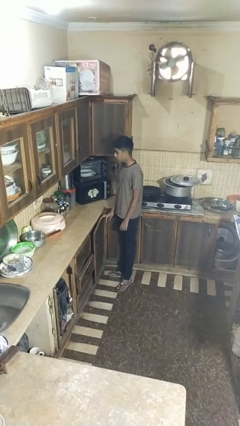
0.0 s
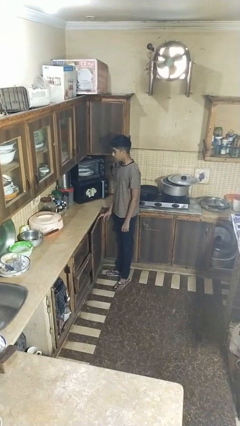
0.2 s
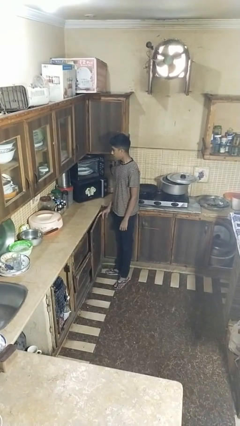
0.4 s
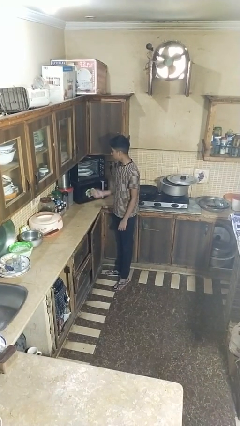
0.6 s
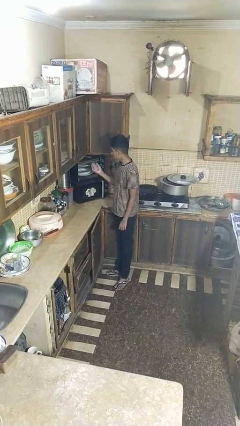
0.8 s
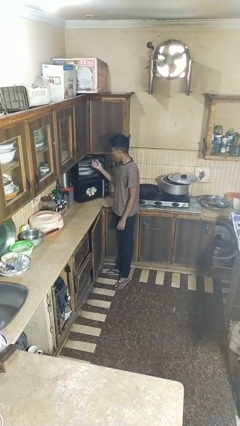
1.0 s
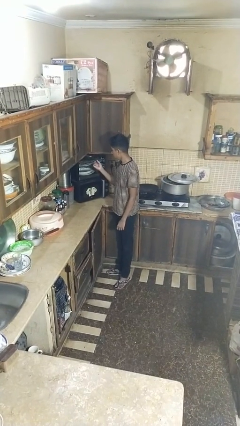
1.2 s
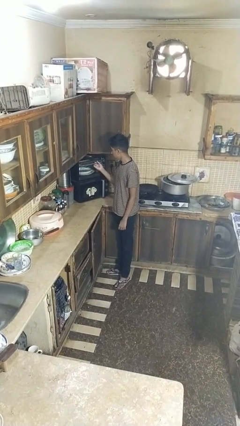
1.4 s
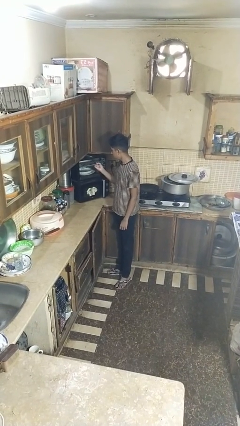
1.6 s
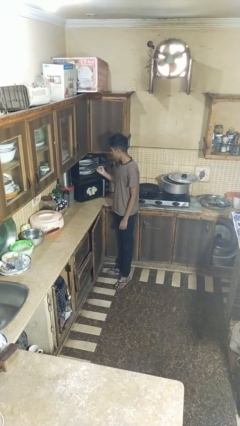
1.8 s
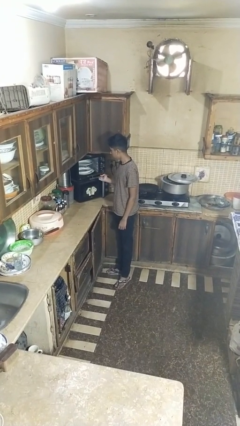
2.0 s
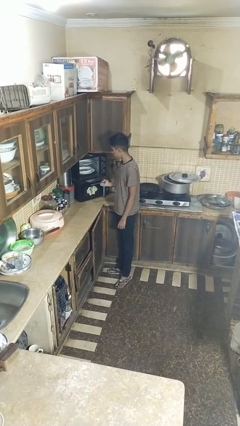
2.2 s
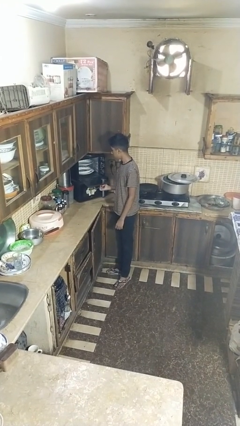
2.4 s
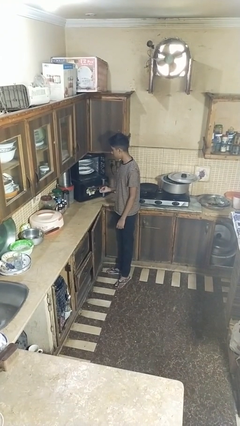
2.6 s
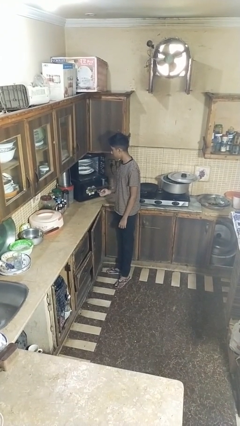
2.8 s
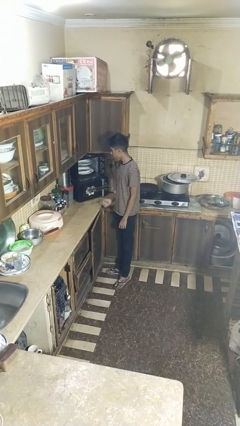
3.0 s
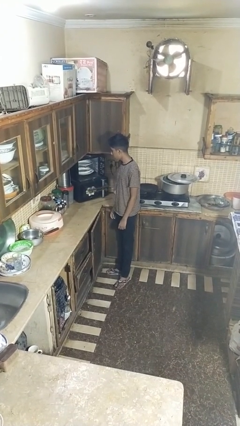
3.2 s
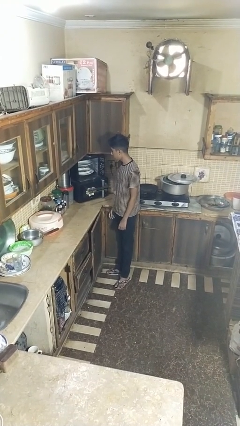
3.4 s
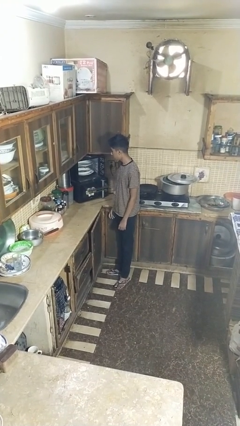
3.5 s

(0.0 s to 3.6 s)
person opens dishwasher

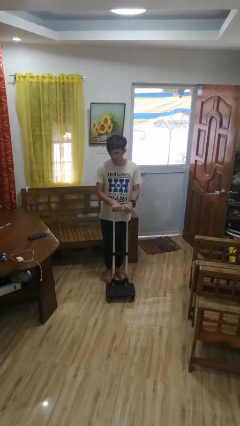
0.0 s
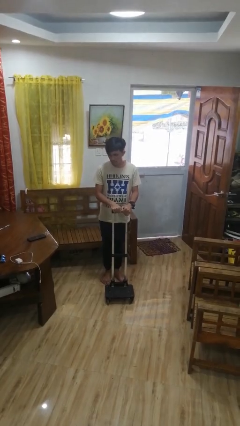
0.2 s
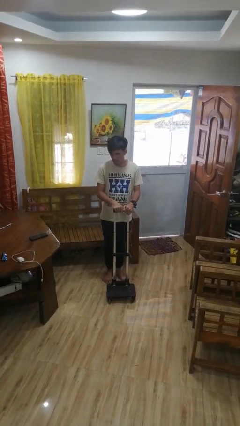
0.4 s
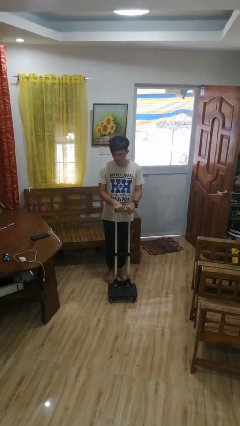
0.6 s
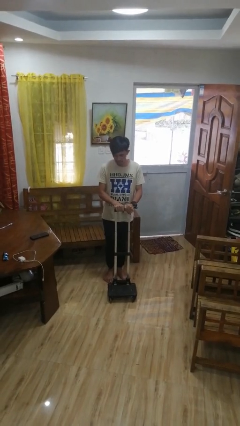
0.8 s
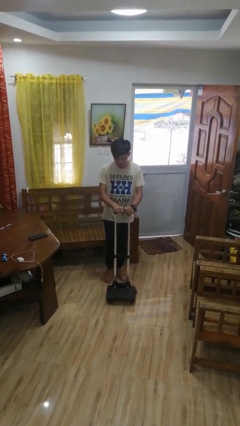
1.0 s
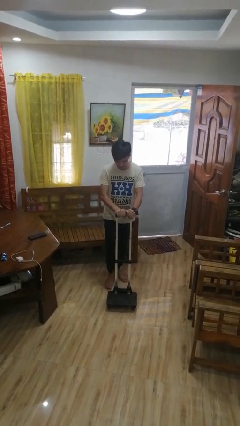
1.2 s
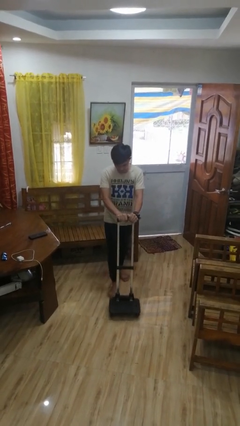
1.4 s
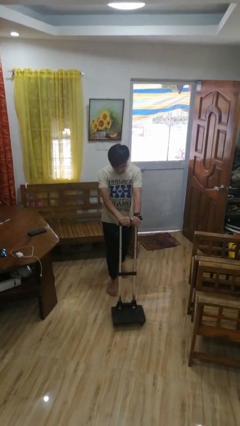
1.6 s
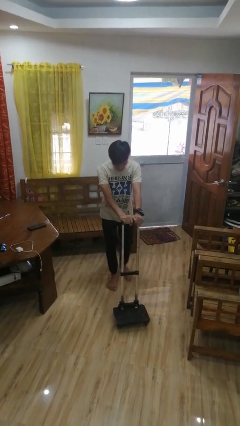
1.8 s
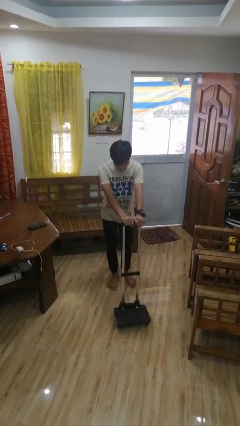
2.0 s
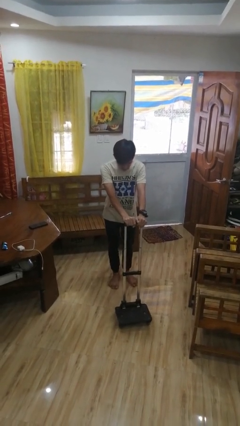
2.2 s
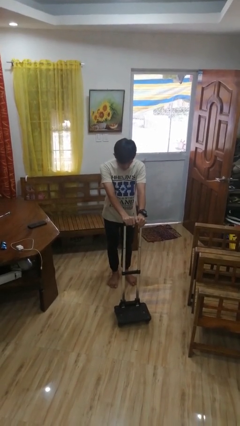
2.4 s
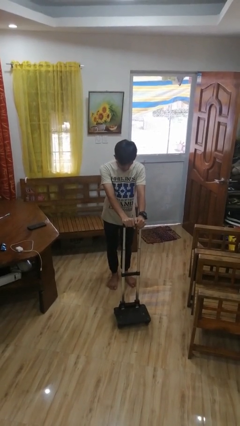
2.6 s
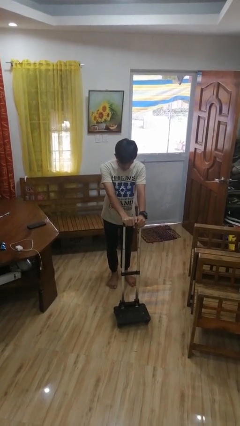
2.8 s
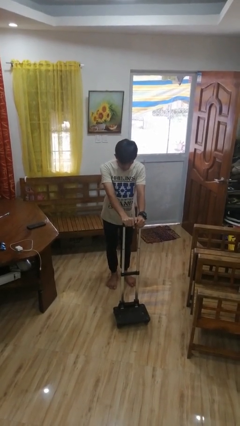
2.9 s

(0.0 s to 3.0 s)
person pushes wheeled cart

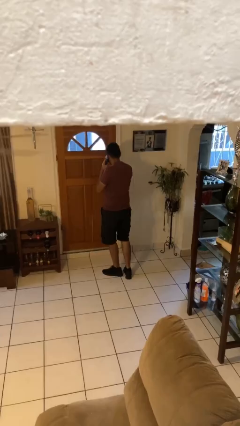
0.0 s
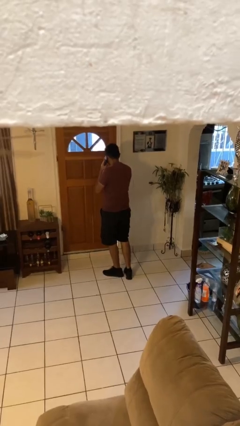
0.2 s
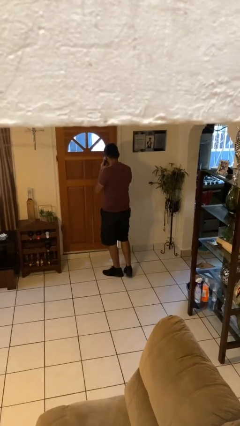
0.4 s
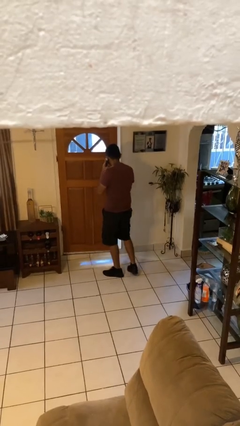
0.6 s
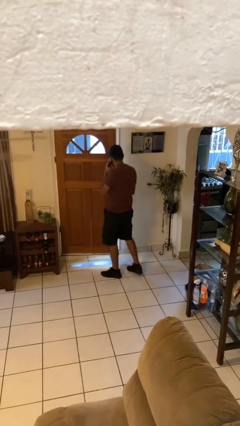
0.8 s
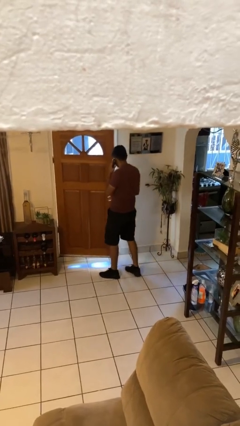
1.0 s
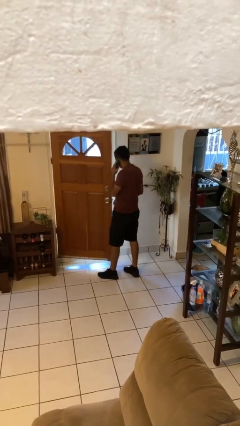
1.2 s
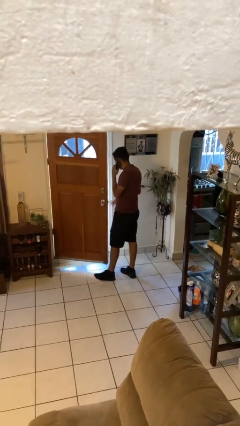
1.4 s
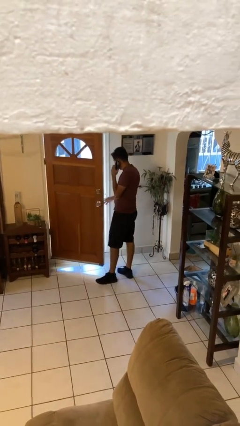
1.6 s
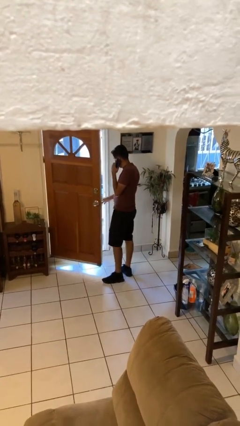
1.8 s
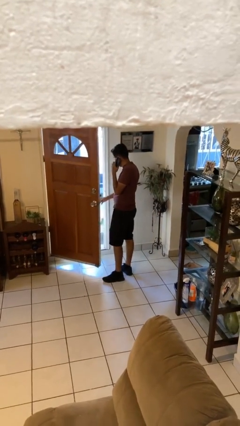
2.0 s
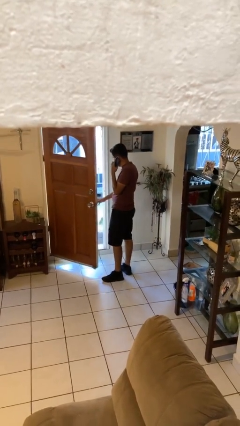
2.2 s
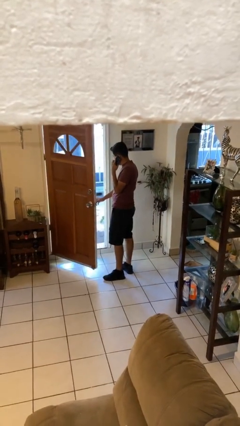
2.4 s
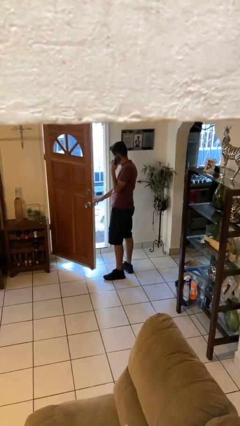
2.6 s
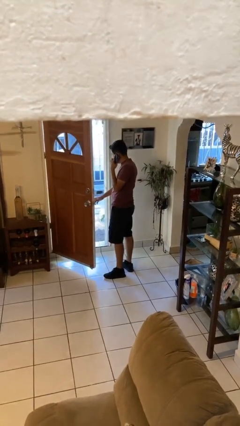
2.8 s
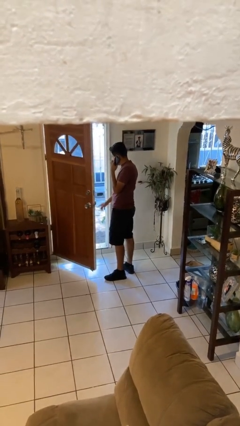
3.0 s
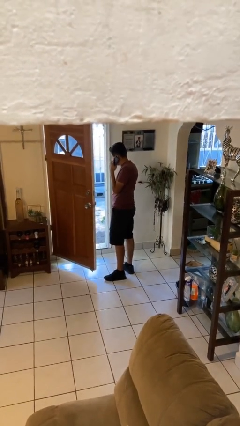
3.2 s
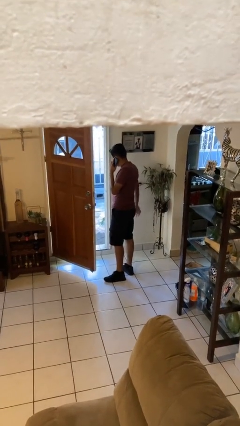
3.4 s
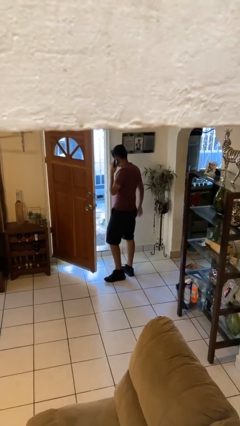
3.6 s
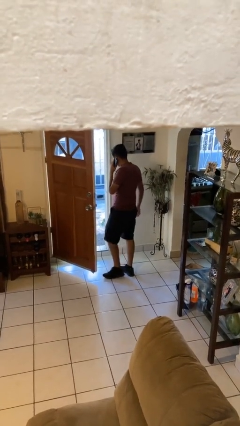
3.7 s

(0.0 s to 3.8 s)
person opens facility door

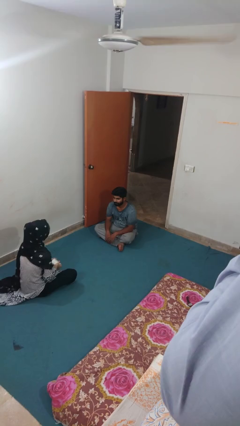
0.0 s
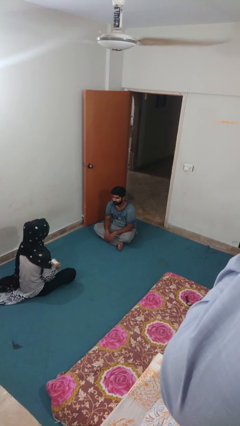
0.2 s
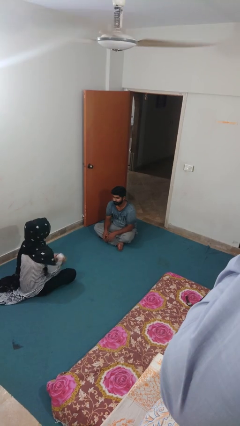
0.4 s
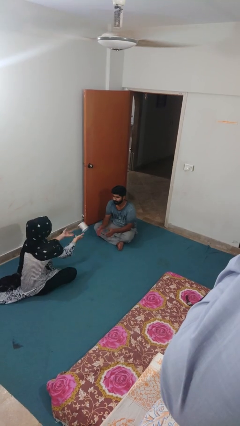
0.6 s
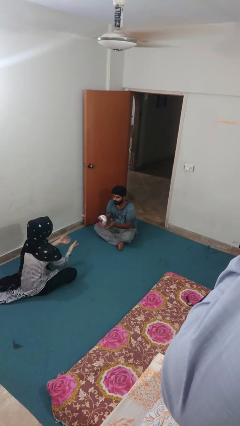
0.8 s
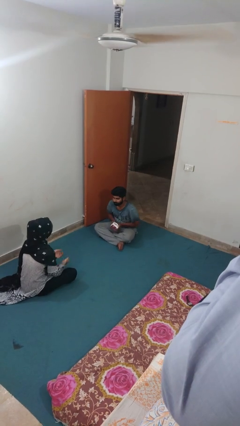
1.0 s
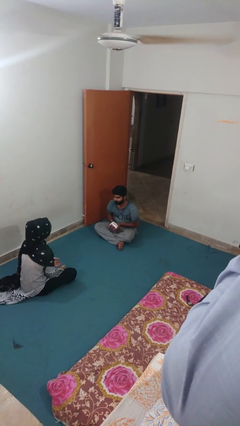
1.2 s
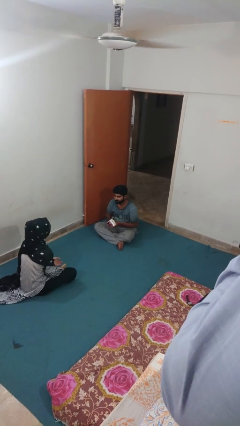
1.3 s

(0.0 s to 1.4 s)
person catches object from person

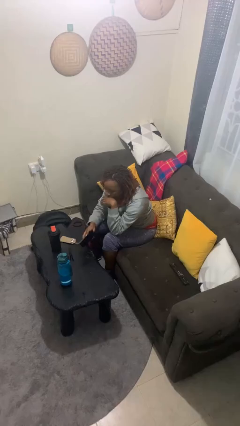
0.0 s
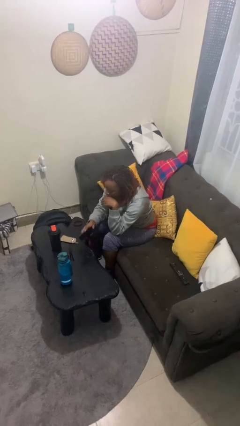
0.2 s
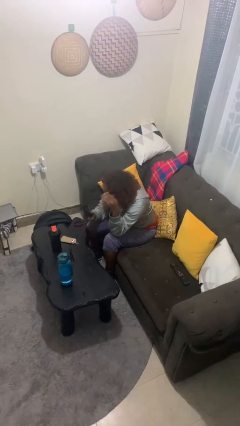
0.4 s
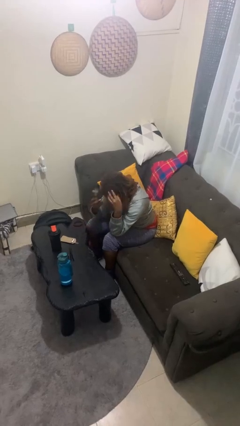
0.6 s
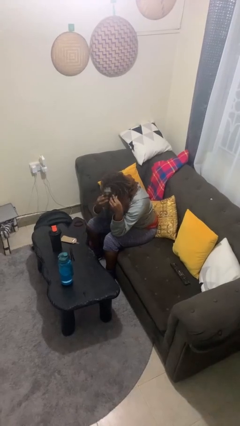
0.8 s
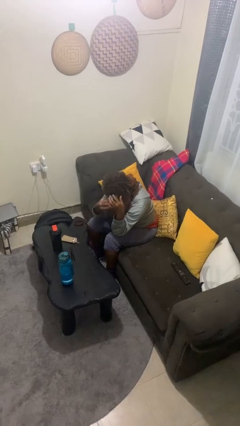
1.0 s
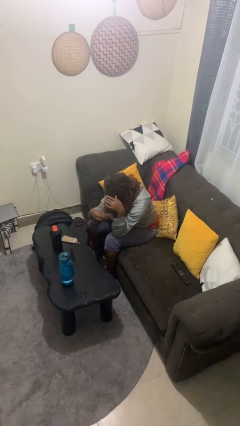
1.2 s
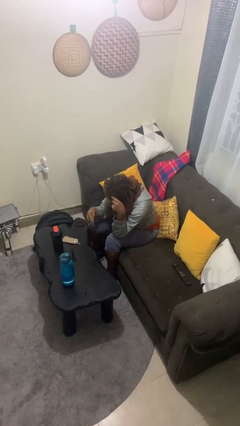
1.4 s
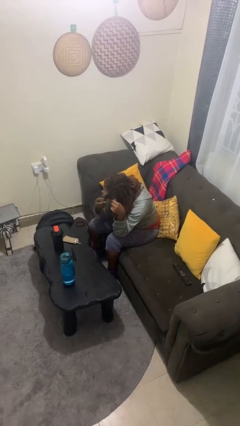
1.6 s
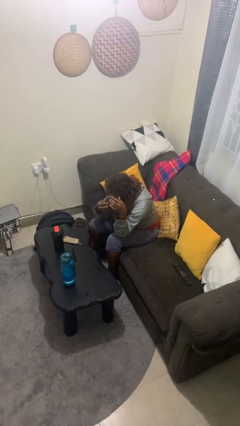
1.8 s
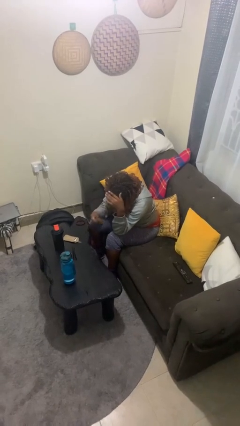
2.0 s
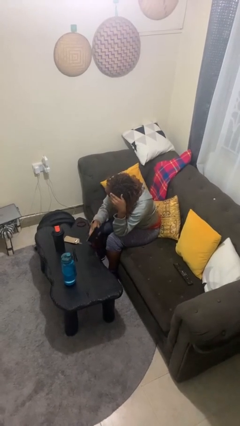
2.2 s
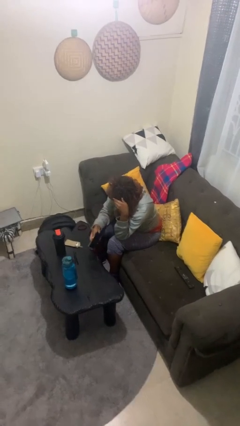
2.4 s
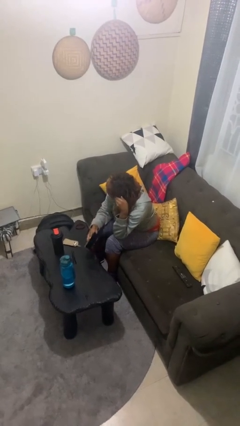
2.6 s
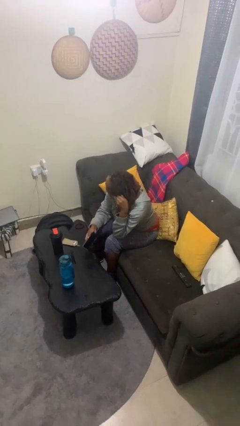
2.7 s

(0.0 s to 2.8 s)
person brushes hair

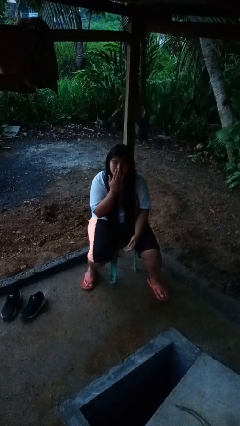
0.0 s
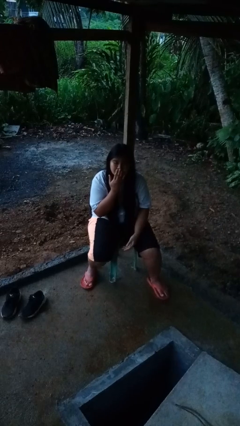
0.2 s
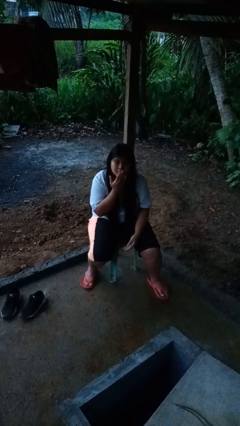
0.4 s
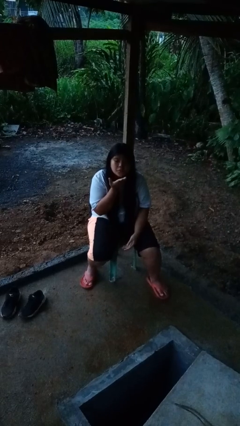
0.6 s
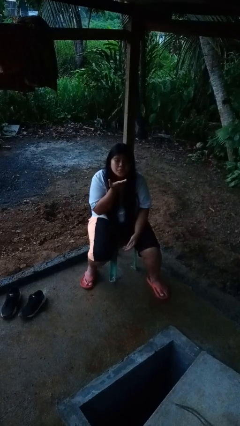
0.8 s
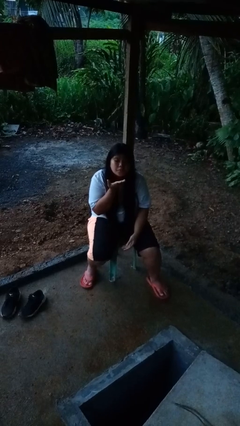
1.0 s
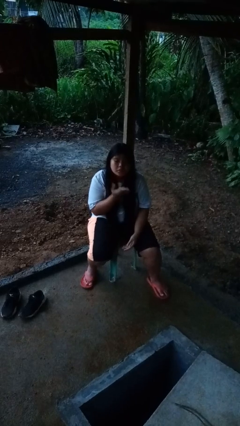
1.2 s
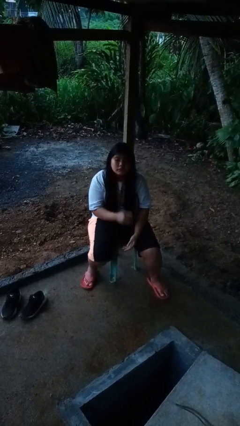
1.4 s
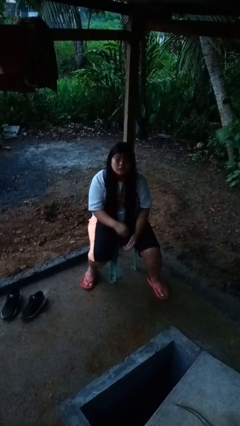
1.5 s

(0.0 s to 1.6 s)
person gestures blow kiss

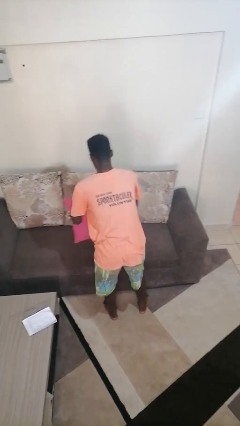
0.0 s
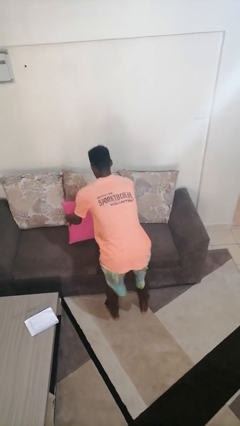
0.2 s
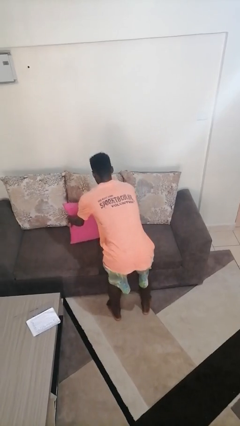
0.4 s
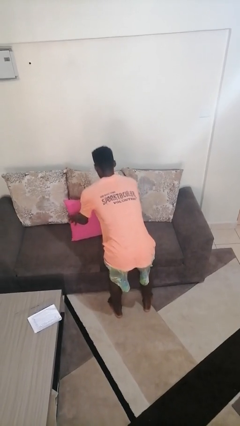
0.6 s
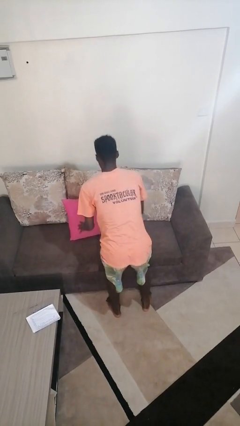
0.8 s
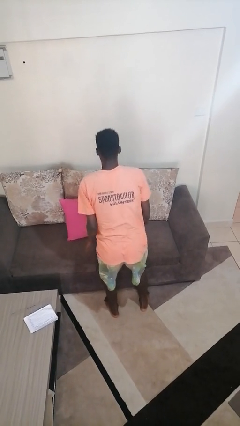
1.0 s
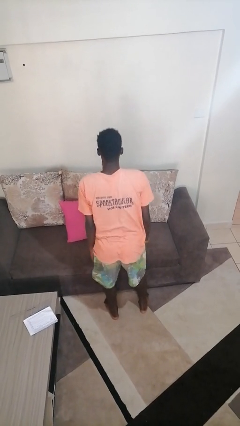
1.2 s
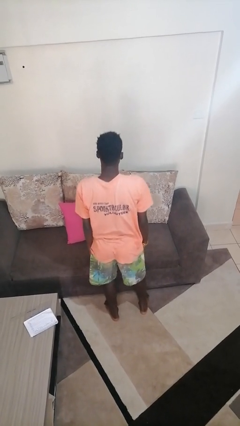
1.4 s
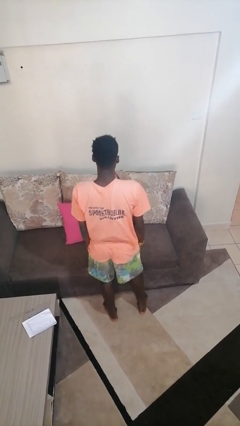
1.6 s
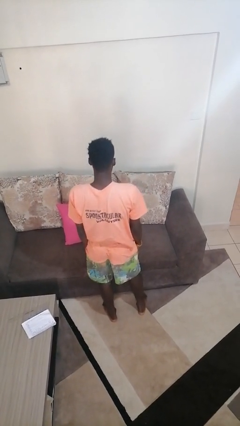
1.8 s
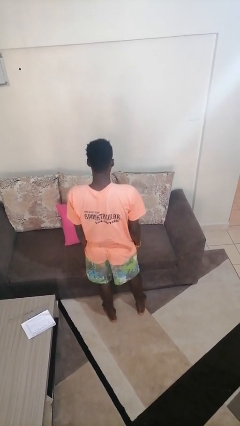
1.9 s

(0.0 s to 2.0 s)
person puts down object on couch
